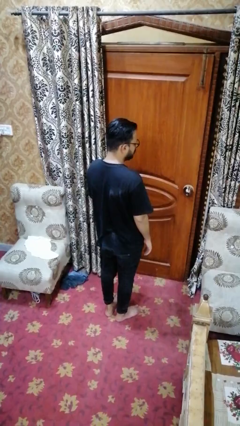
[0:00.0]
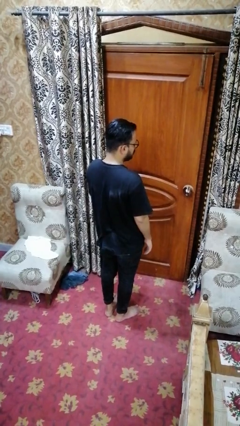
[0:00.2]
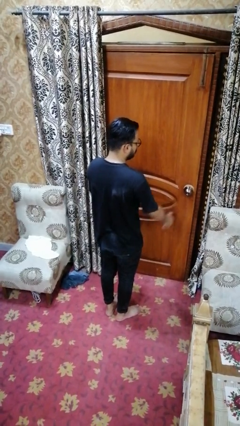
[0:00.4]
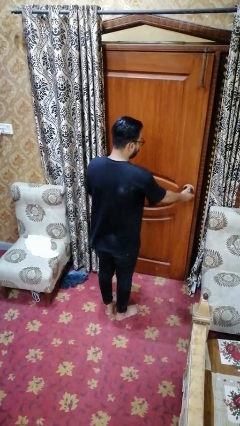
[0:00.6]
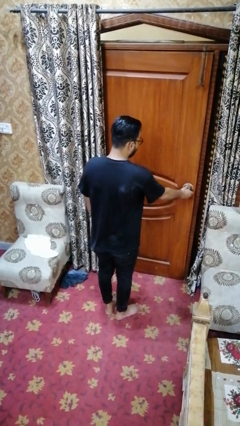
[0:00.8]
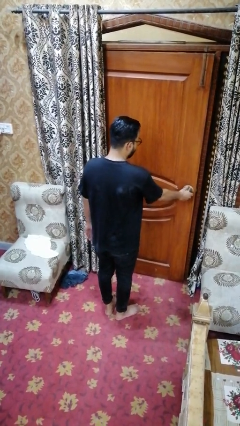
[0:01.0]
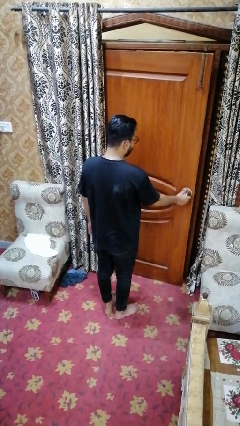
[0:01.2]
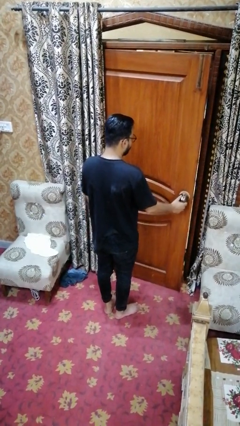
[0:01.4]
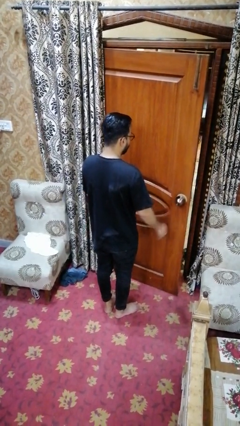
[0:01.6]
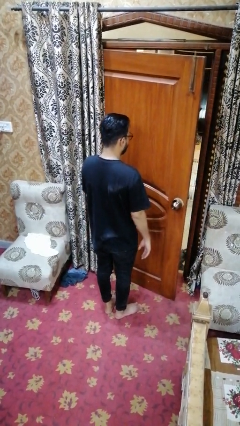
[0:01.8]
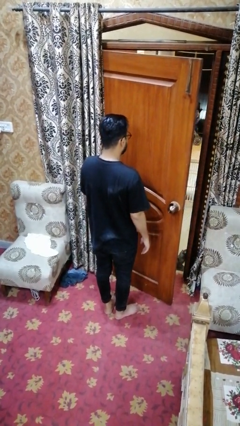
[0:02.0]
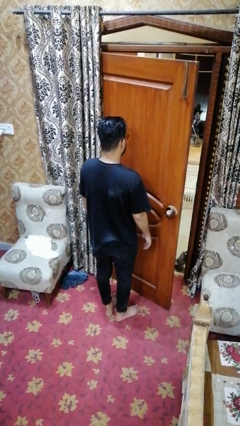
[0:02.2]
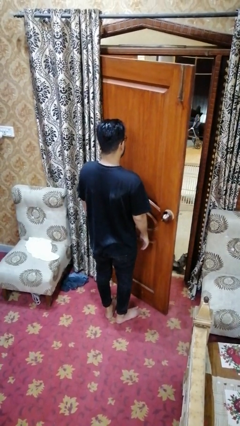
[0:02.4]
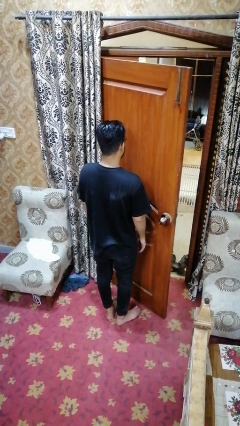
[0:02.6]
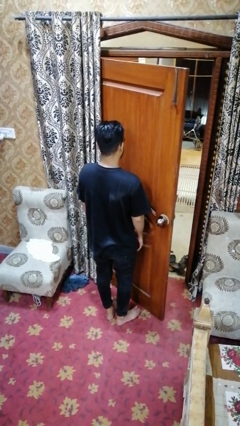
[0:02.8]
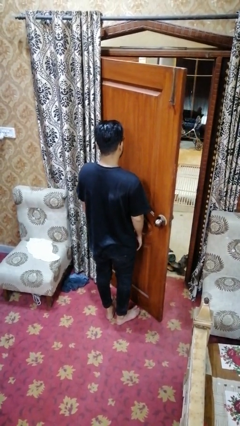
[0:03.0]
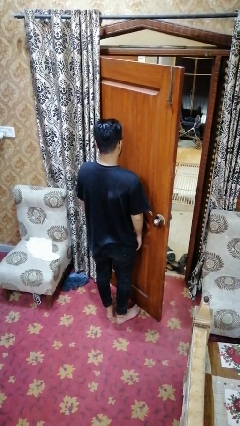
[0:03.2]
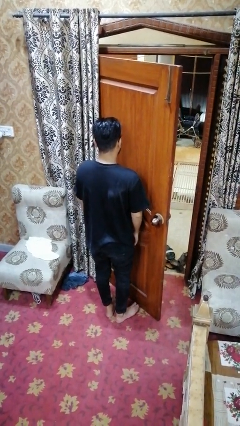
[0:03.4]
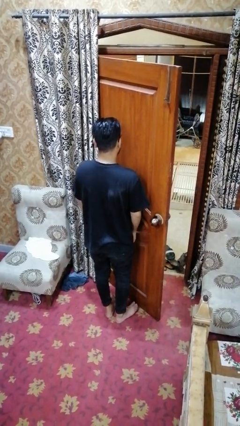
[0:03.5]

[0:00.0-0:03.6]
person opens facility door

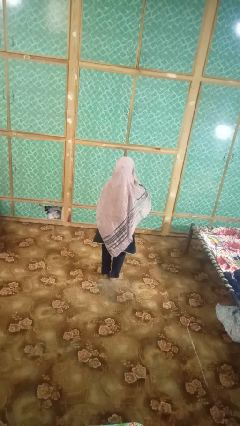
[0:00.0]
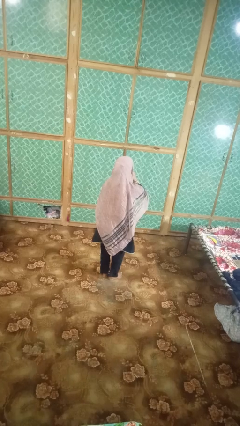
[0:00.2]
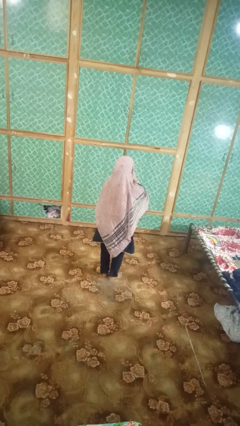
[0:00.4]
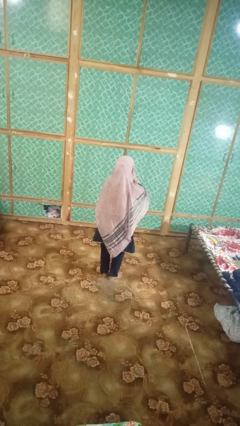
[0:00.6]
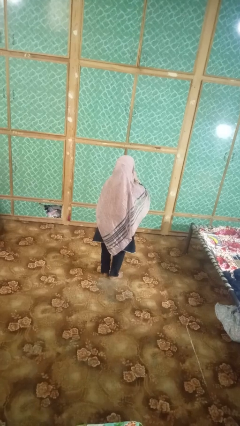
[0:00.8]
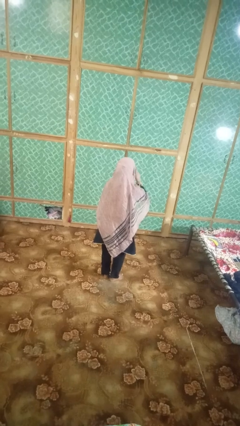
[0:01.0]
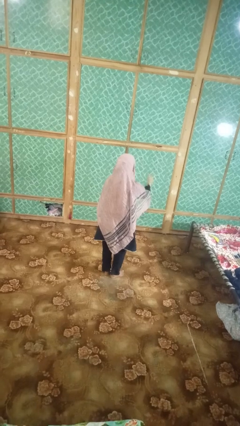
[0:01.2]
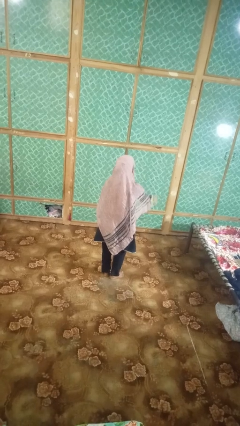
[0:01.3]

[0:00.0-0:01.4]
person gestures be quiet

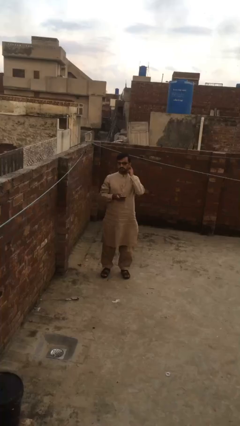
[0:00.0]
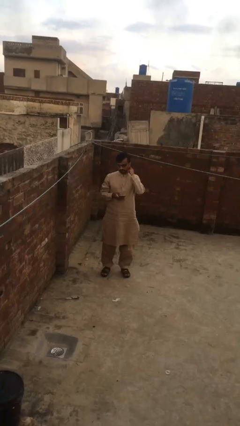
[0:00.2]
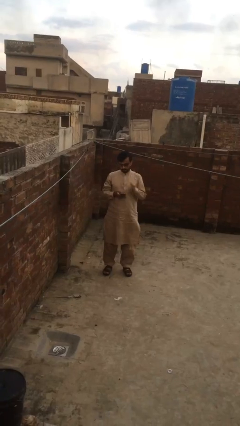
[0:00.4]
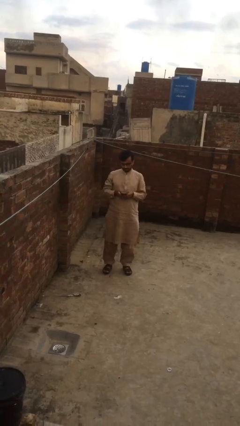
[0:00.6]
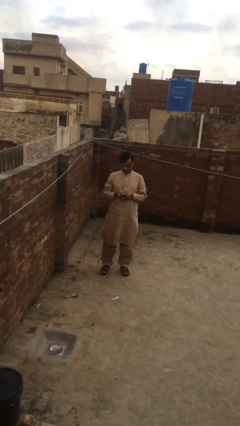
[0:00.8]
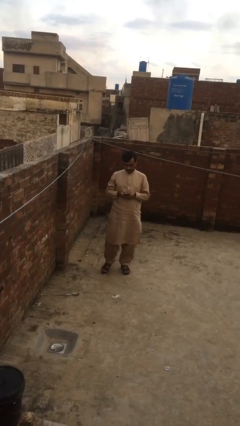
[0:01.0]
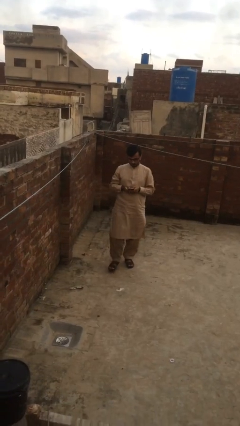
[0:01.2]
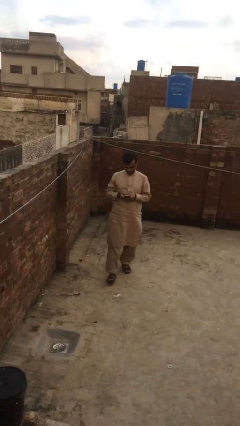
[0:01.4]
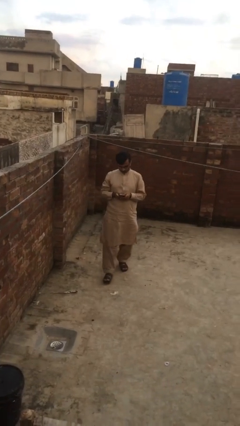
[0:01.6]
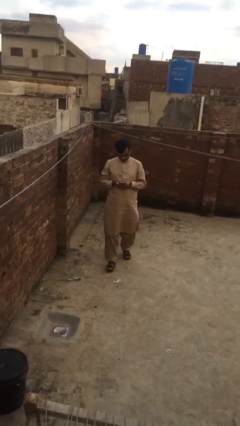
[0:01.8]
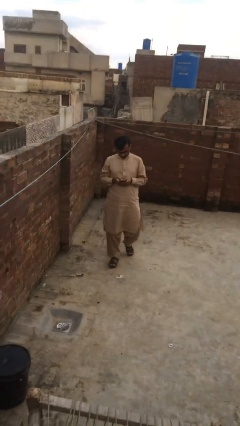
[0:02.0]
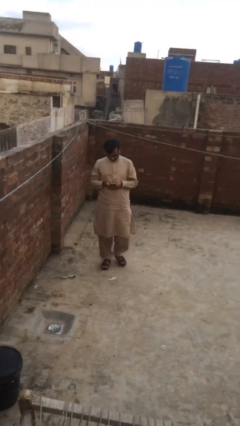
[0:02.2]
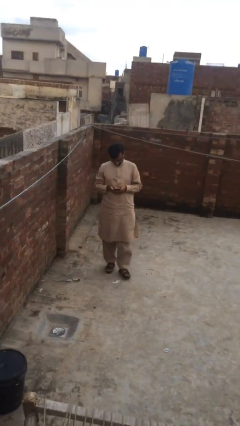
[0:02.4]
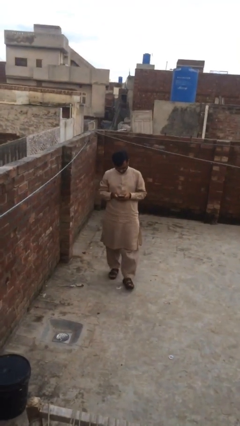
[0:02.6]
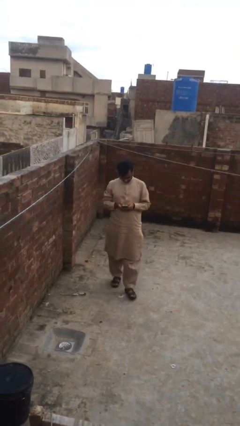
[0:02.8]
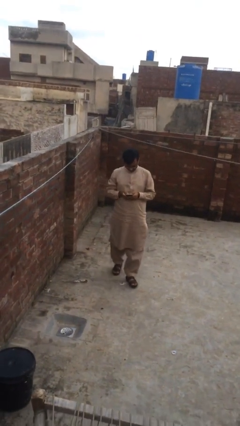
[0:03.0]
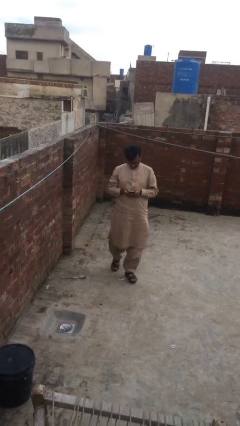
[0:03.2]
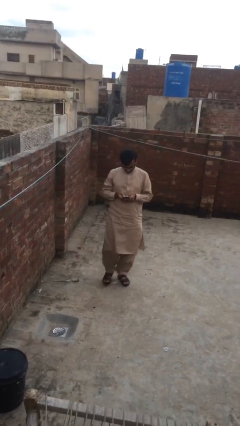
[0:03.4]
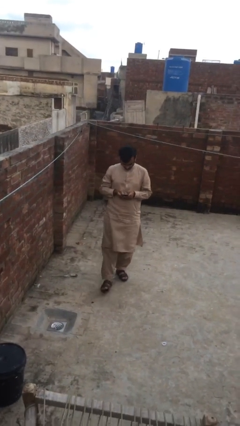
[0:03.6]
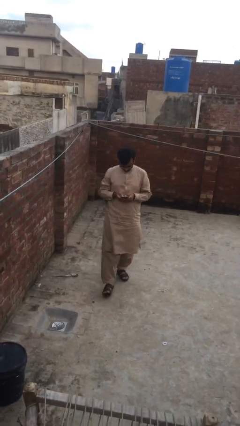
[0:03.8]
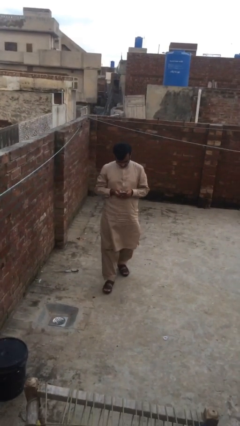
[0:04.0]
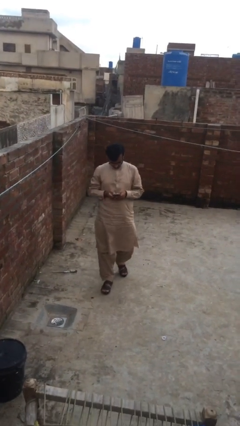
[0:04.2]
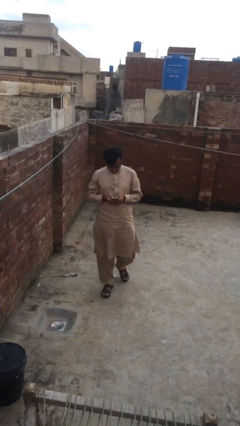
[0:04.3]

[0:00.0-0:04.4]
person texts on phone

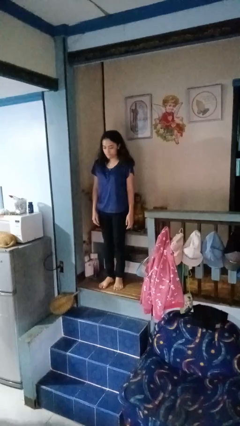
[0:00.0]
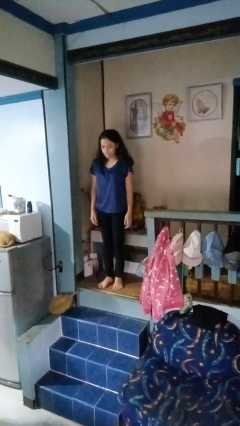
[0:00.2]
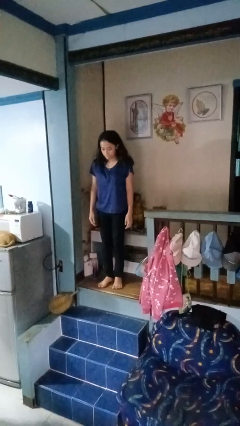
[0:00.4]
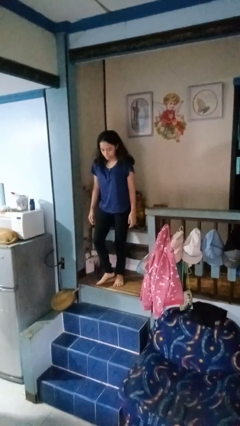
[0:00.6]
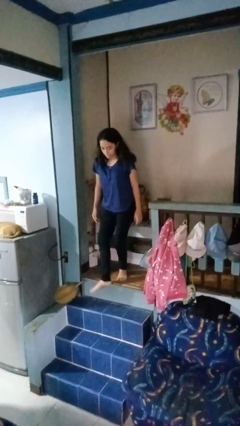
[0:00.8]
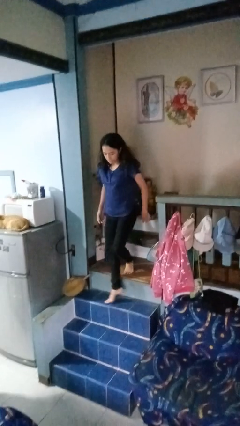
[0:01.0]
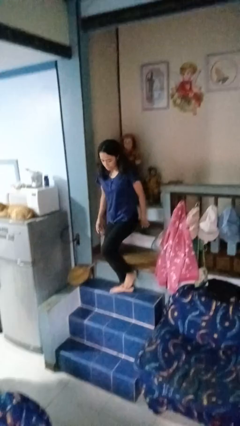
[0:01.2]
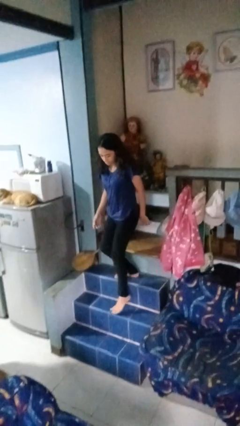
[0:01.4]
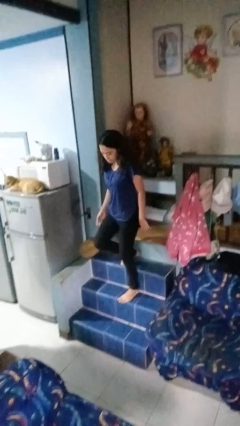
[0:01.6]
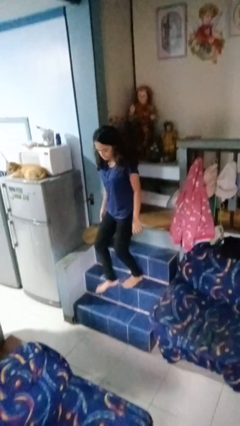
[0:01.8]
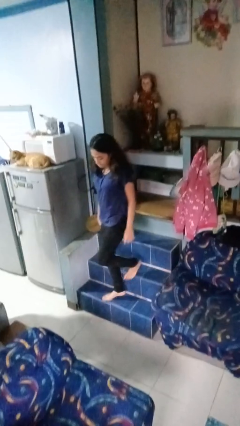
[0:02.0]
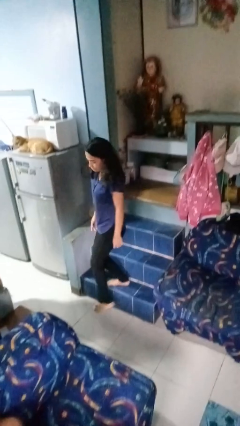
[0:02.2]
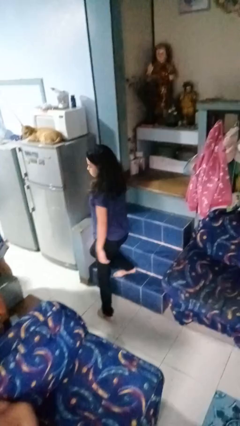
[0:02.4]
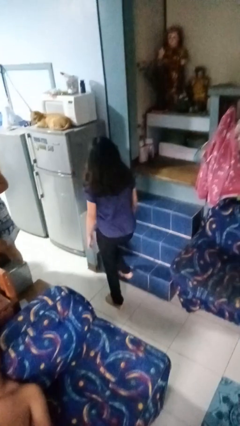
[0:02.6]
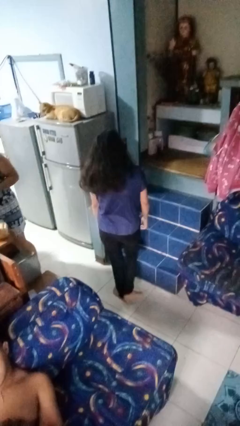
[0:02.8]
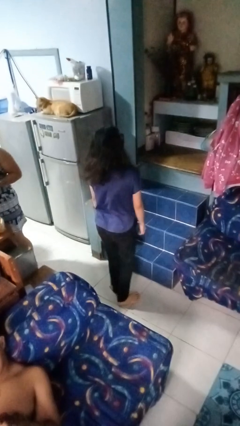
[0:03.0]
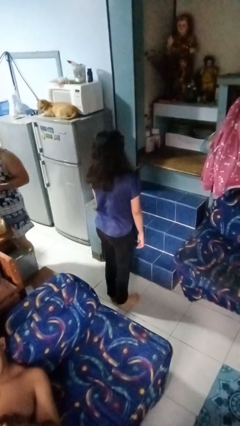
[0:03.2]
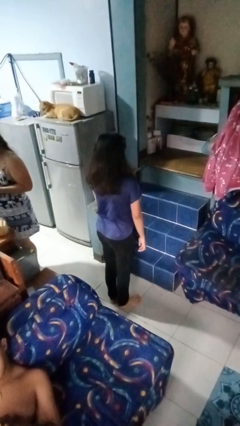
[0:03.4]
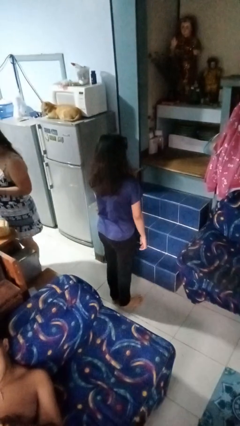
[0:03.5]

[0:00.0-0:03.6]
person climbs down stairs

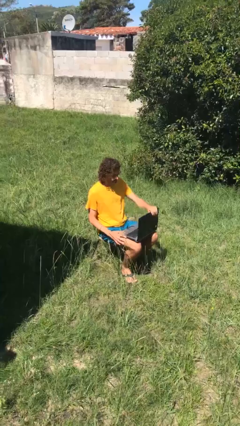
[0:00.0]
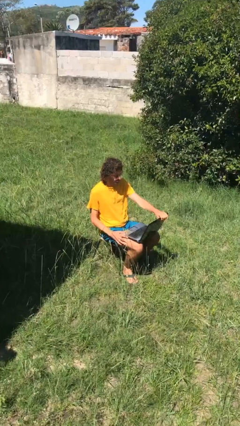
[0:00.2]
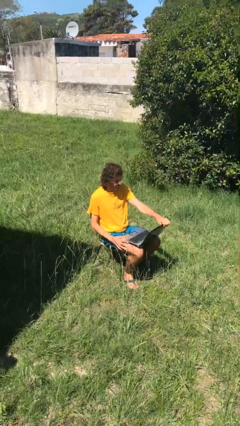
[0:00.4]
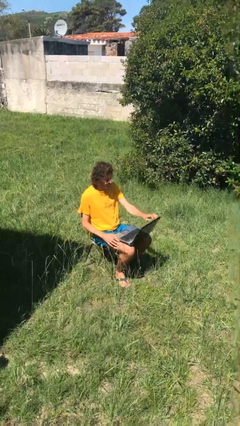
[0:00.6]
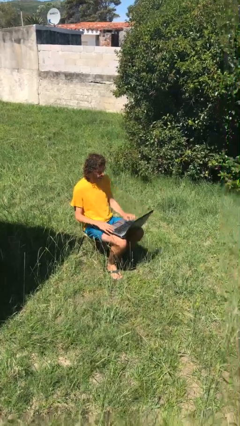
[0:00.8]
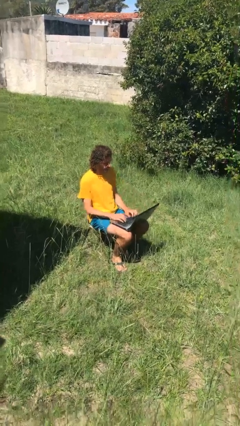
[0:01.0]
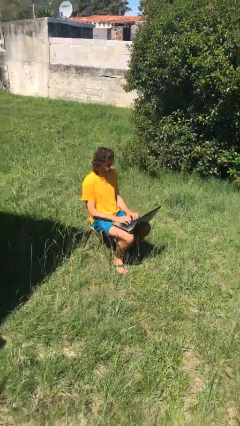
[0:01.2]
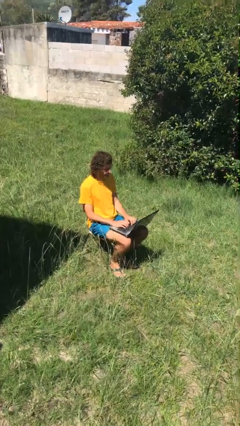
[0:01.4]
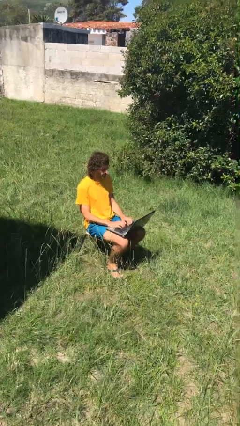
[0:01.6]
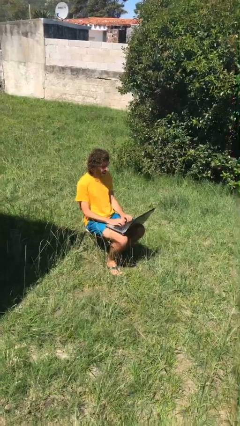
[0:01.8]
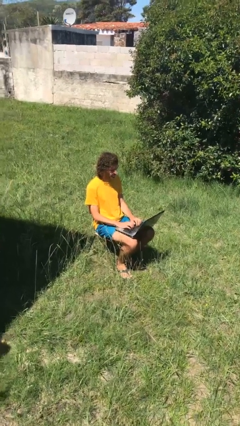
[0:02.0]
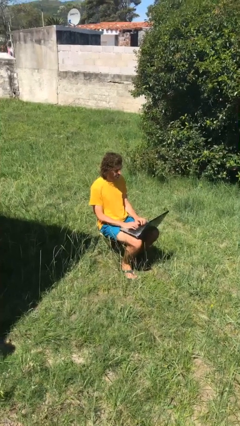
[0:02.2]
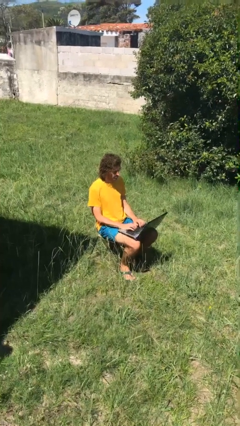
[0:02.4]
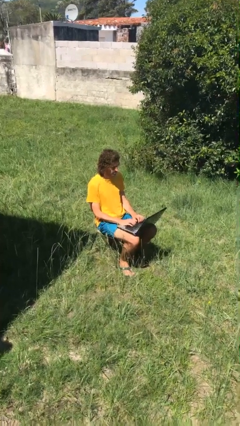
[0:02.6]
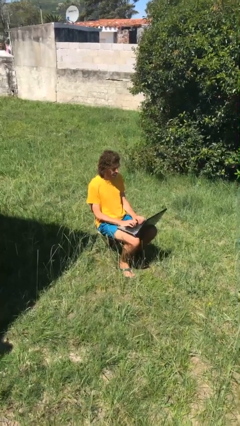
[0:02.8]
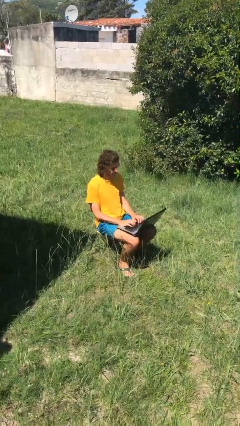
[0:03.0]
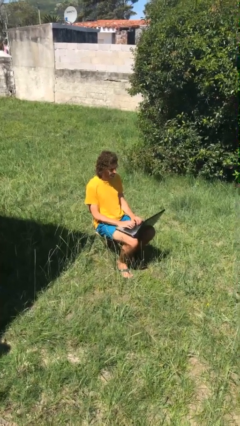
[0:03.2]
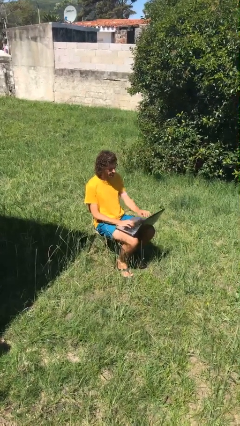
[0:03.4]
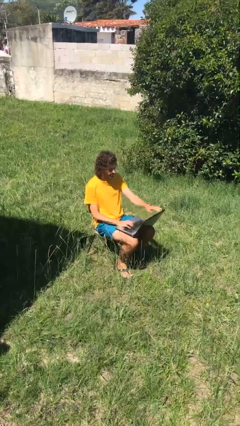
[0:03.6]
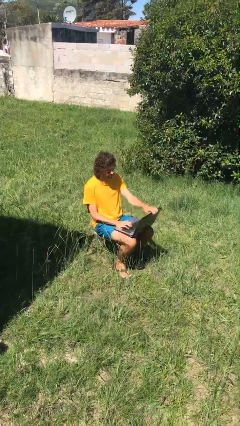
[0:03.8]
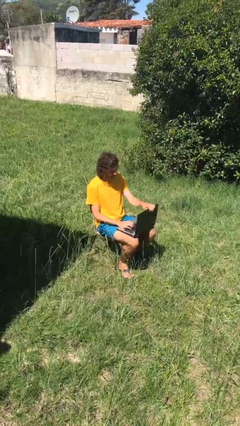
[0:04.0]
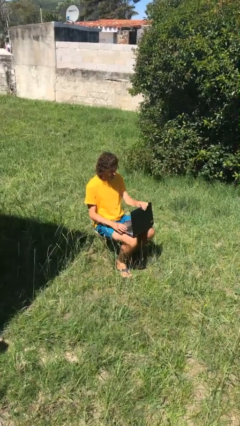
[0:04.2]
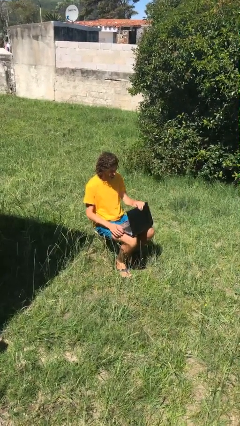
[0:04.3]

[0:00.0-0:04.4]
person interacts with laptop

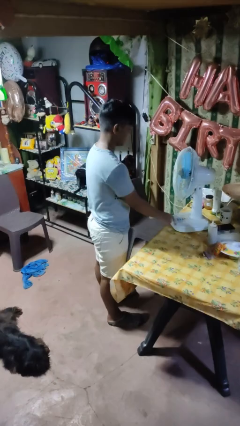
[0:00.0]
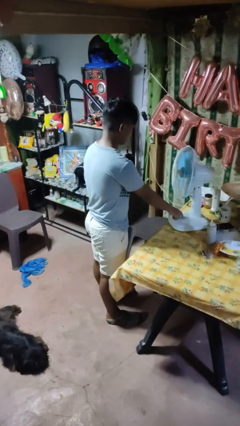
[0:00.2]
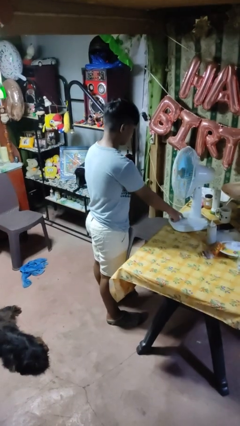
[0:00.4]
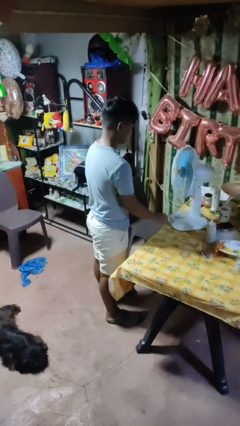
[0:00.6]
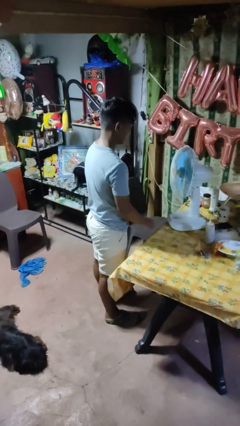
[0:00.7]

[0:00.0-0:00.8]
person turns on fan
